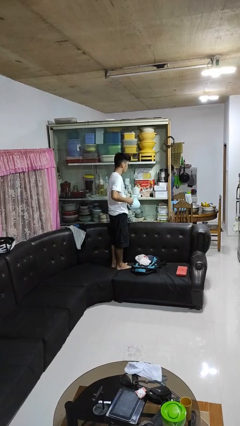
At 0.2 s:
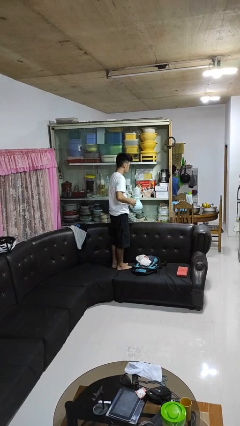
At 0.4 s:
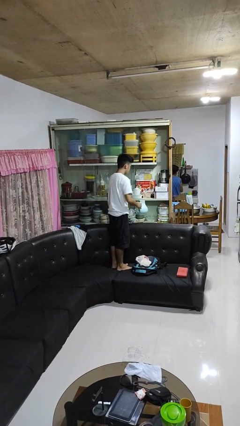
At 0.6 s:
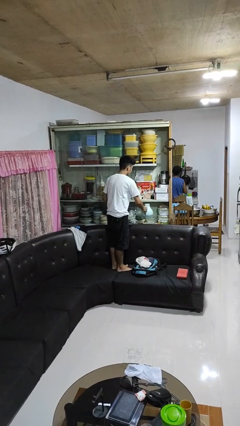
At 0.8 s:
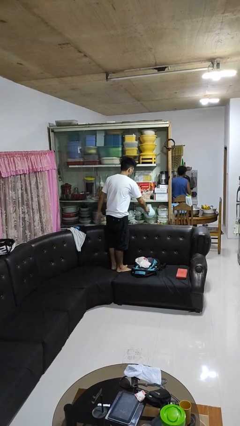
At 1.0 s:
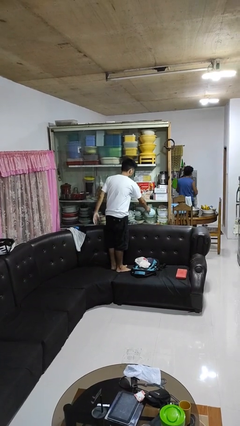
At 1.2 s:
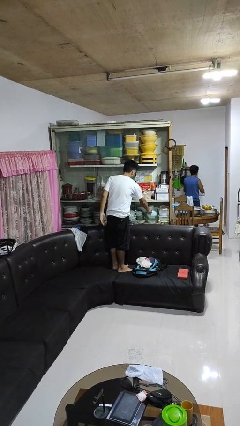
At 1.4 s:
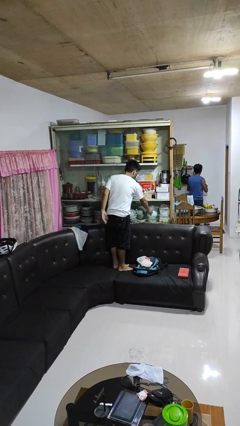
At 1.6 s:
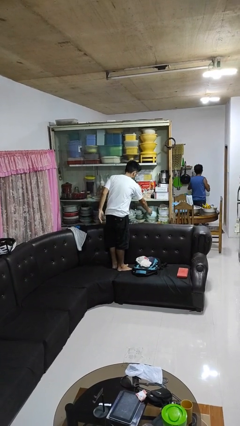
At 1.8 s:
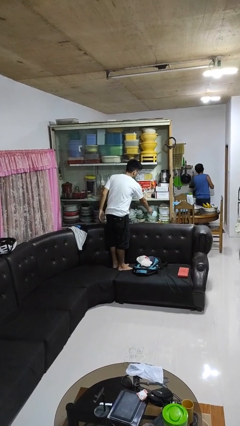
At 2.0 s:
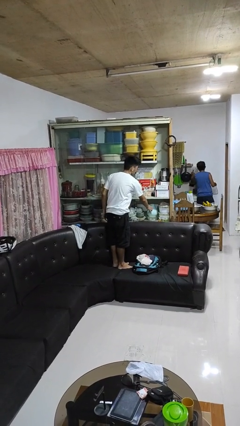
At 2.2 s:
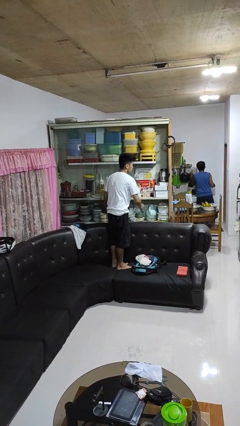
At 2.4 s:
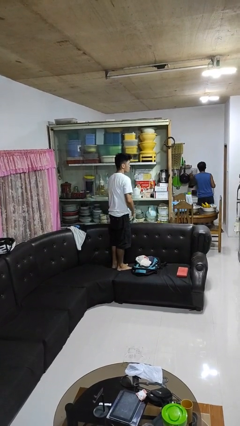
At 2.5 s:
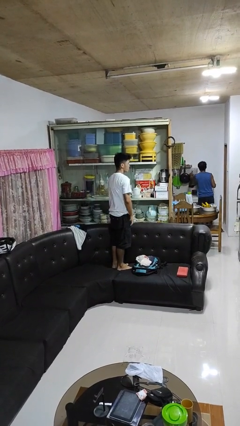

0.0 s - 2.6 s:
person puts down object into cabinet

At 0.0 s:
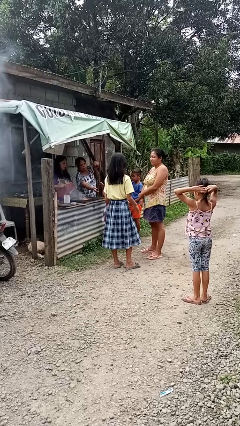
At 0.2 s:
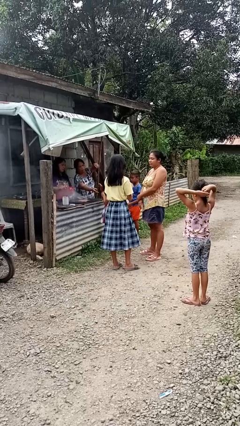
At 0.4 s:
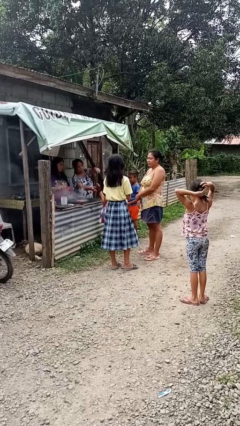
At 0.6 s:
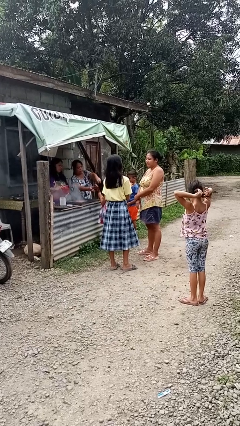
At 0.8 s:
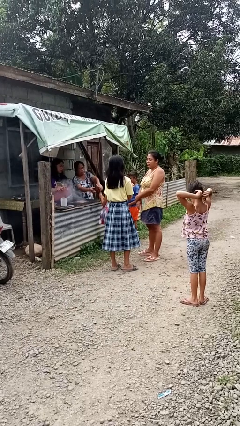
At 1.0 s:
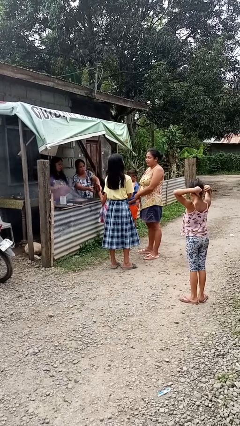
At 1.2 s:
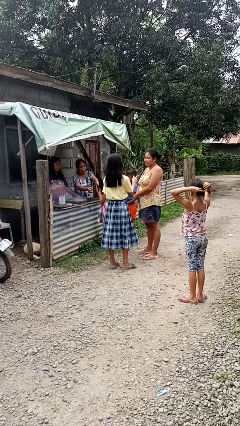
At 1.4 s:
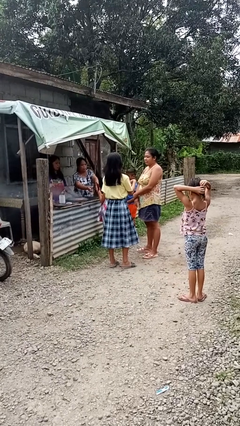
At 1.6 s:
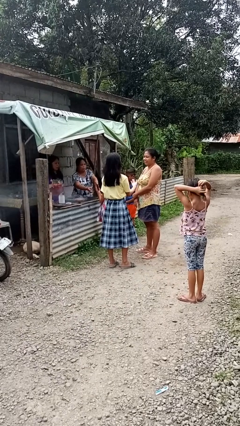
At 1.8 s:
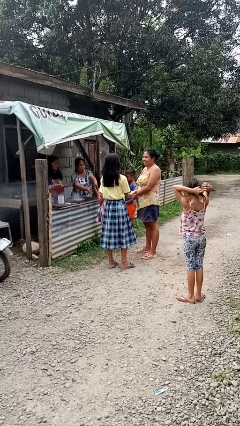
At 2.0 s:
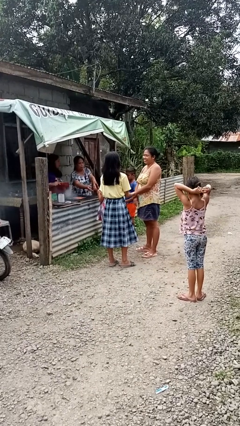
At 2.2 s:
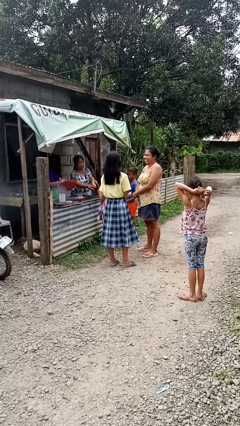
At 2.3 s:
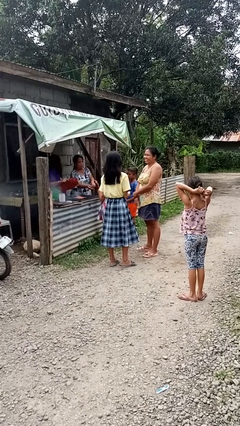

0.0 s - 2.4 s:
person talks to person

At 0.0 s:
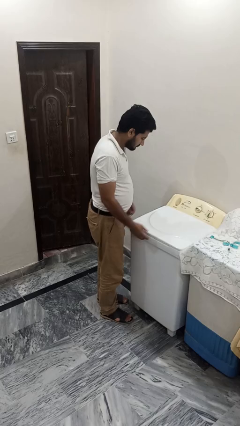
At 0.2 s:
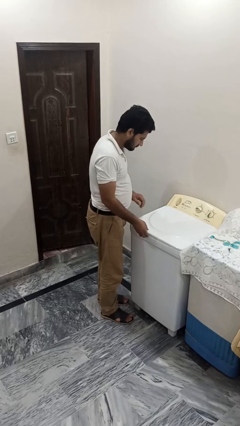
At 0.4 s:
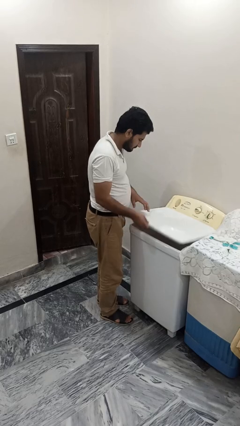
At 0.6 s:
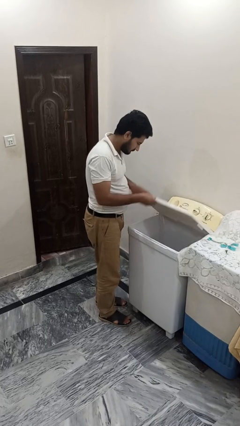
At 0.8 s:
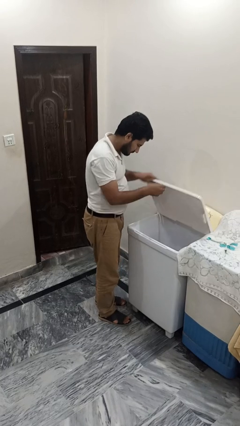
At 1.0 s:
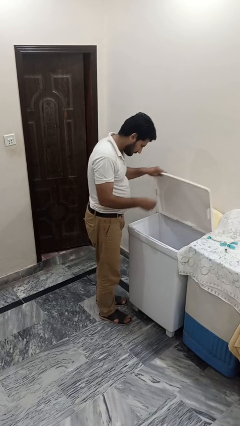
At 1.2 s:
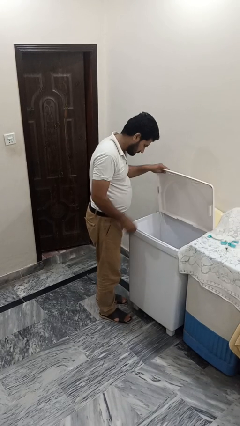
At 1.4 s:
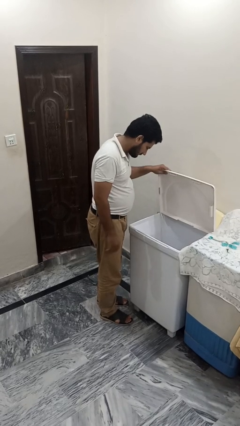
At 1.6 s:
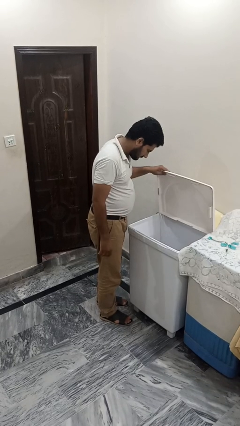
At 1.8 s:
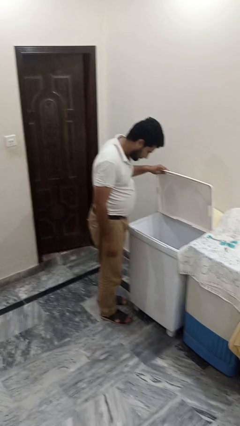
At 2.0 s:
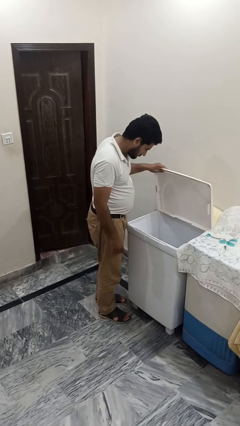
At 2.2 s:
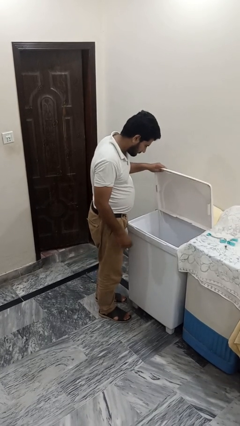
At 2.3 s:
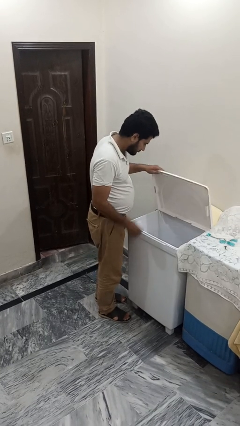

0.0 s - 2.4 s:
person opens clothes washer

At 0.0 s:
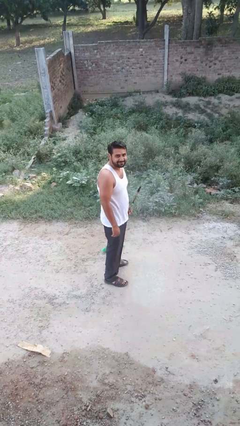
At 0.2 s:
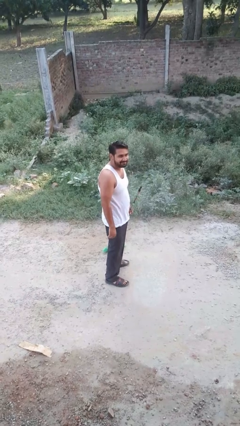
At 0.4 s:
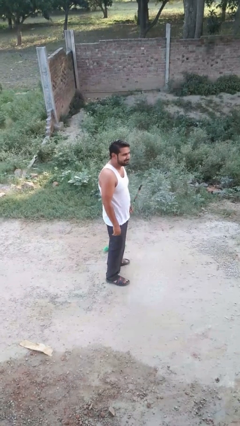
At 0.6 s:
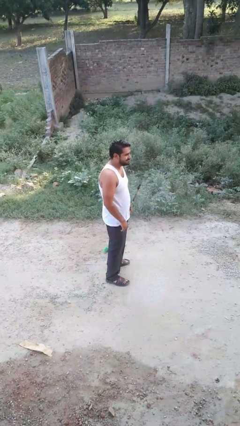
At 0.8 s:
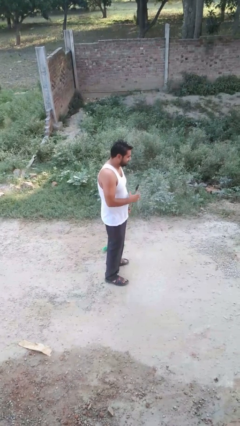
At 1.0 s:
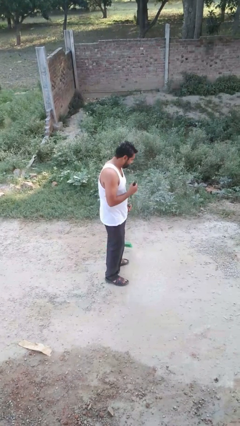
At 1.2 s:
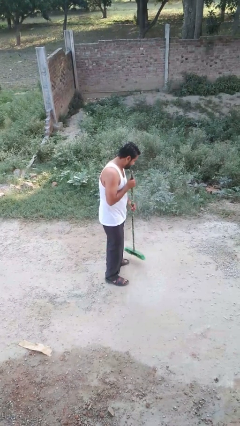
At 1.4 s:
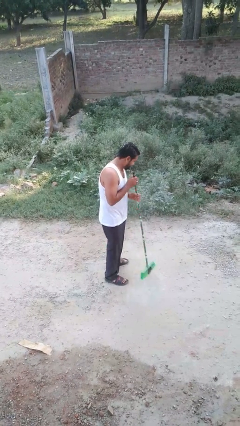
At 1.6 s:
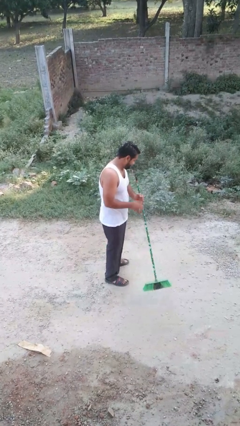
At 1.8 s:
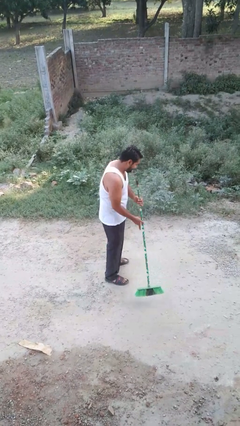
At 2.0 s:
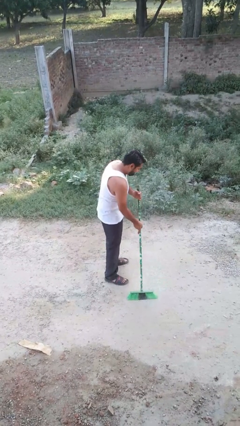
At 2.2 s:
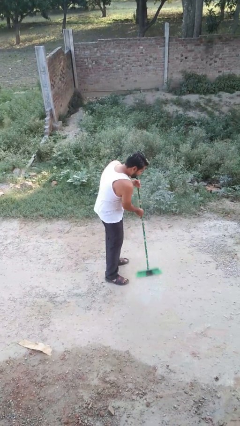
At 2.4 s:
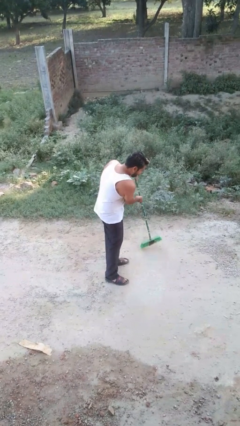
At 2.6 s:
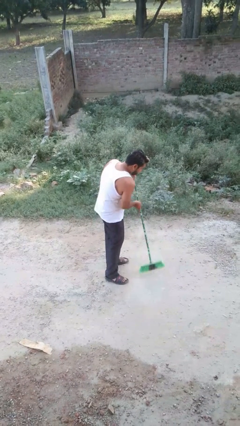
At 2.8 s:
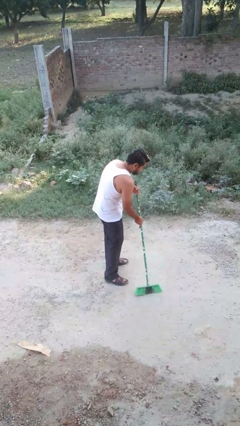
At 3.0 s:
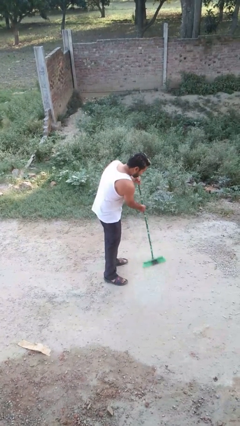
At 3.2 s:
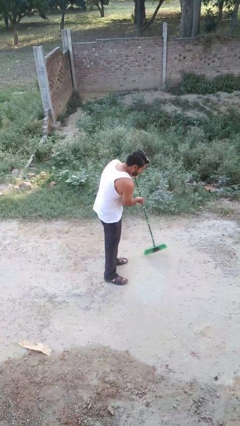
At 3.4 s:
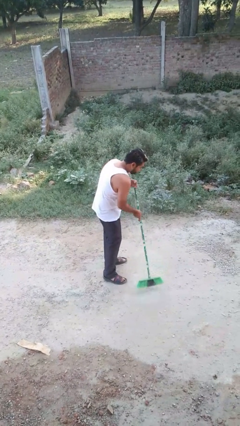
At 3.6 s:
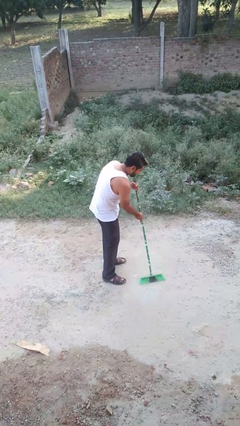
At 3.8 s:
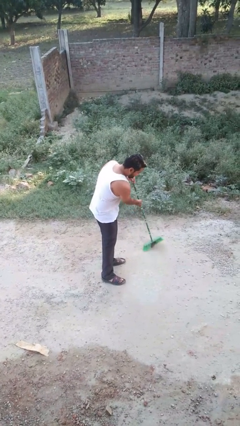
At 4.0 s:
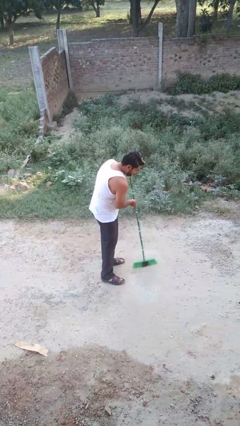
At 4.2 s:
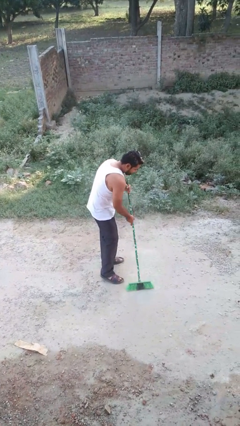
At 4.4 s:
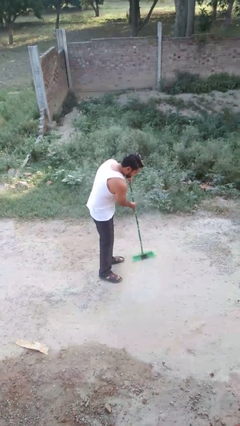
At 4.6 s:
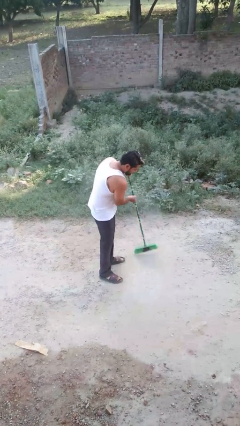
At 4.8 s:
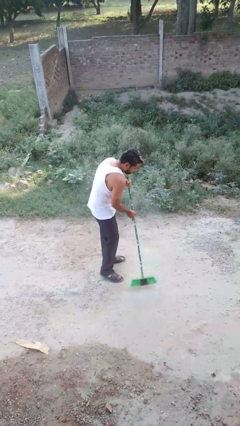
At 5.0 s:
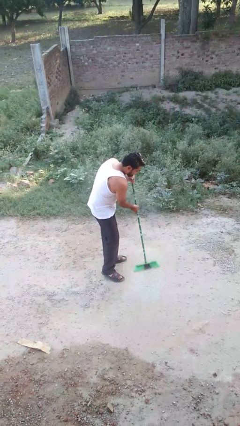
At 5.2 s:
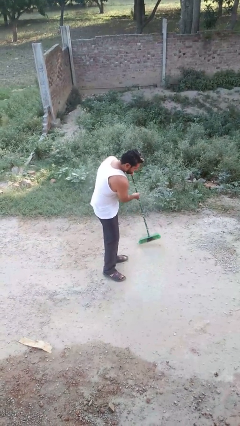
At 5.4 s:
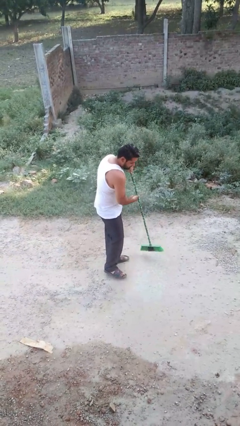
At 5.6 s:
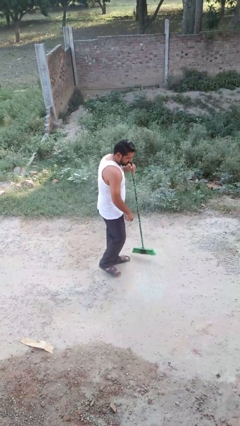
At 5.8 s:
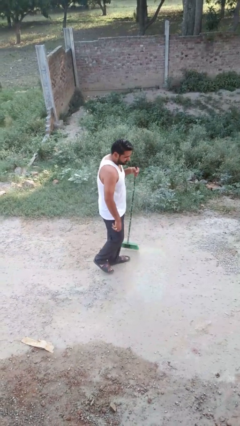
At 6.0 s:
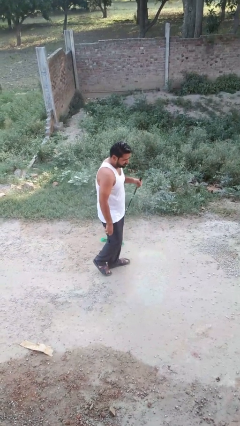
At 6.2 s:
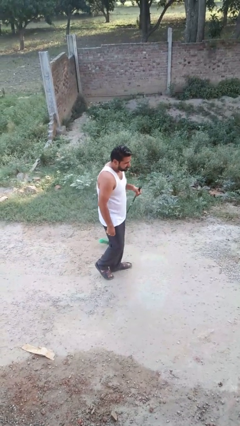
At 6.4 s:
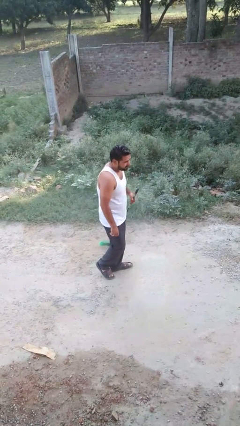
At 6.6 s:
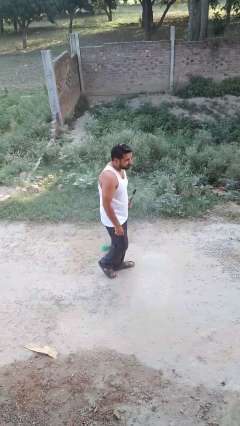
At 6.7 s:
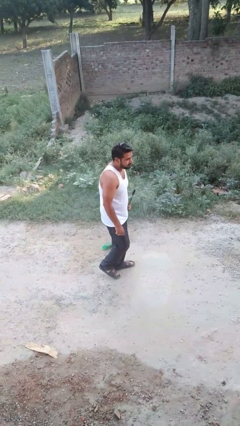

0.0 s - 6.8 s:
person sweeps floor

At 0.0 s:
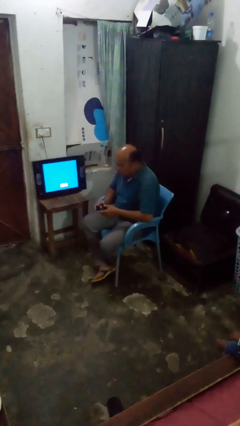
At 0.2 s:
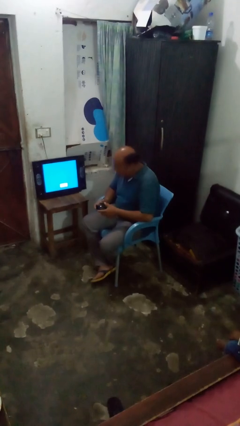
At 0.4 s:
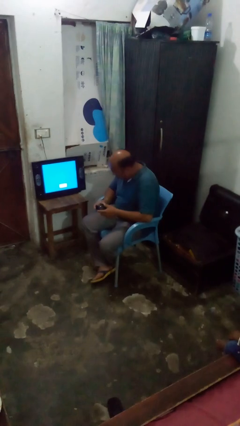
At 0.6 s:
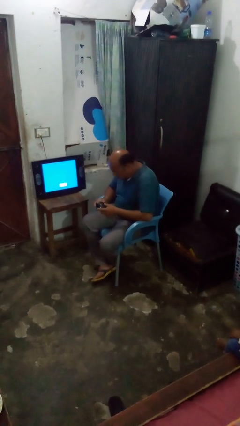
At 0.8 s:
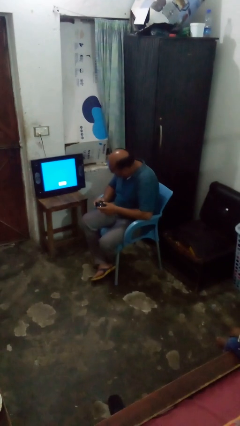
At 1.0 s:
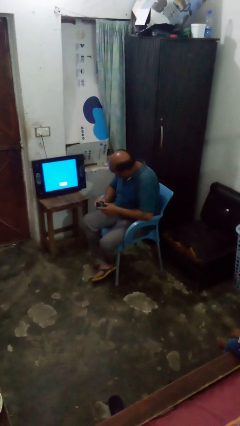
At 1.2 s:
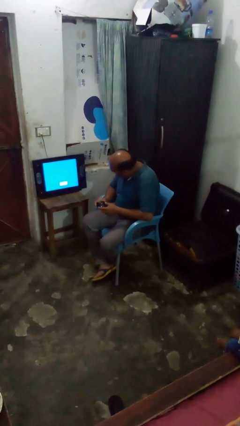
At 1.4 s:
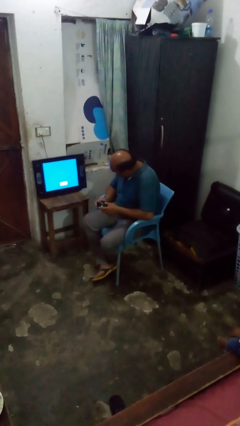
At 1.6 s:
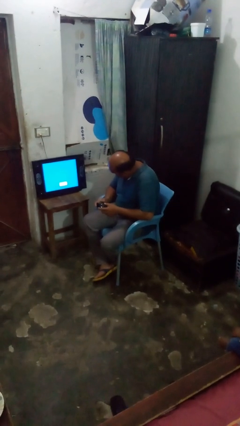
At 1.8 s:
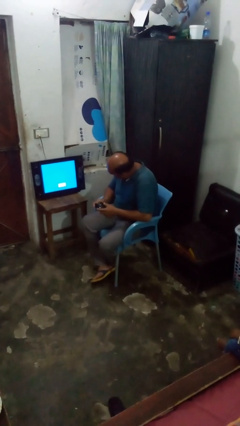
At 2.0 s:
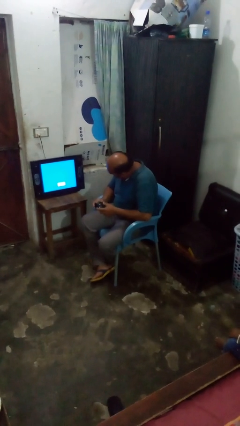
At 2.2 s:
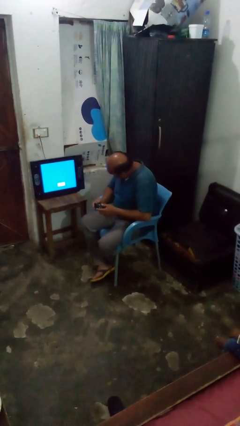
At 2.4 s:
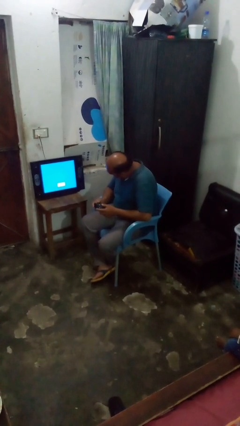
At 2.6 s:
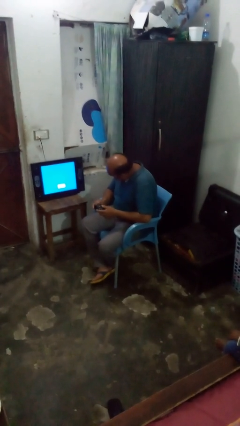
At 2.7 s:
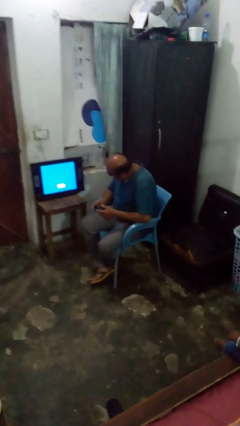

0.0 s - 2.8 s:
person interacts with handheld game

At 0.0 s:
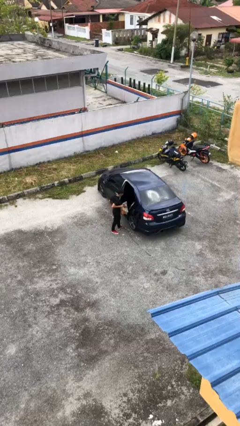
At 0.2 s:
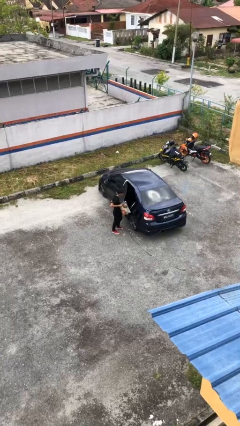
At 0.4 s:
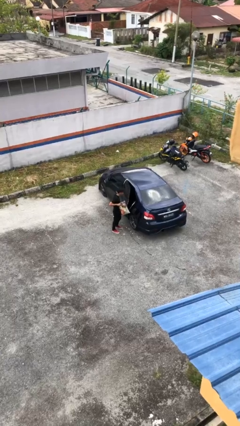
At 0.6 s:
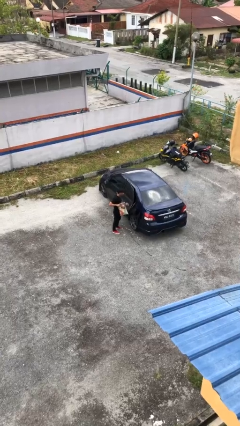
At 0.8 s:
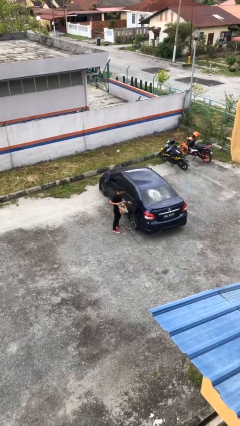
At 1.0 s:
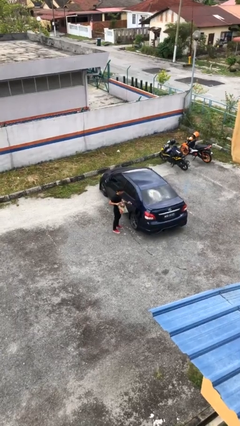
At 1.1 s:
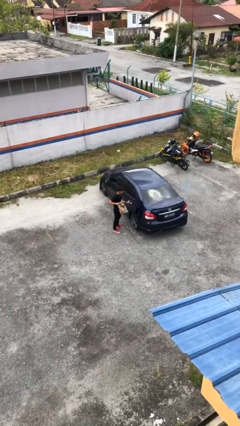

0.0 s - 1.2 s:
person closes car door
